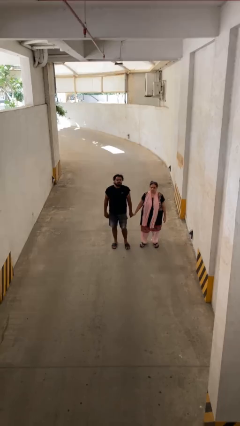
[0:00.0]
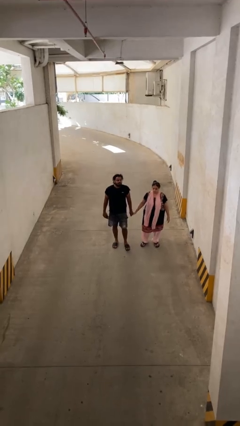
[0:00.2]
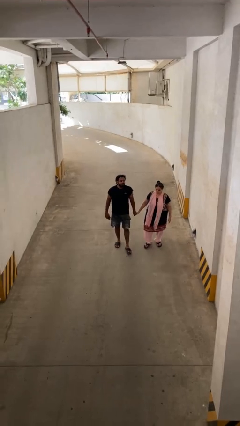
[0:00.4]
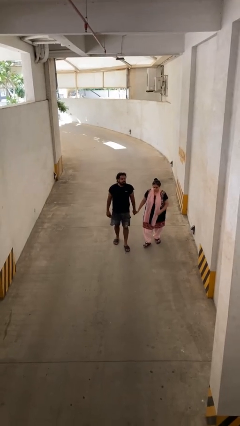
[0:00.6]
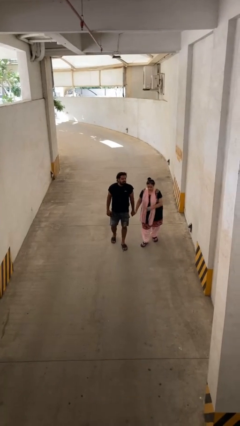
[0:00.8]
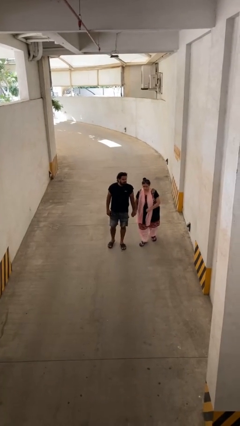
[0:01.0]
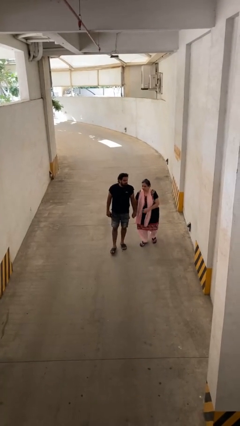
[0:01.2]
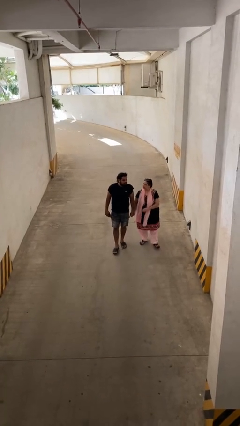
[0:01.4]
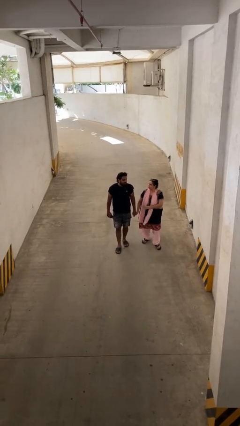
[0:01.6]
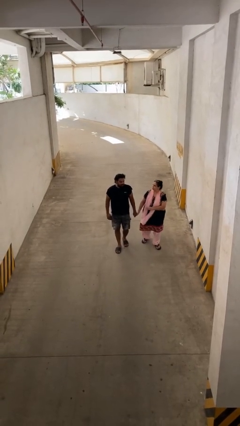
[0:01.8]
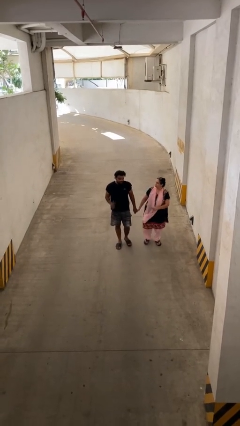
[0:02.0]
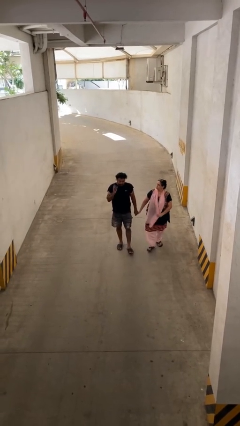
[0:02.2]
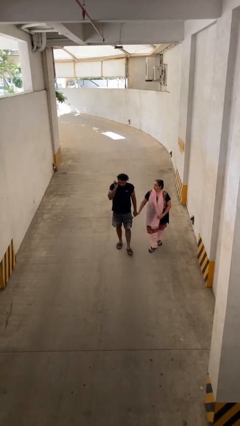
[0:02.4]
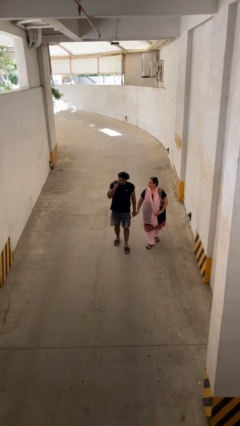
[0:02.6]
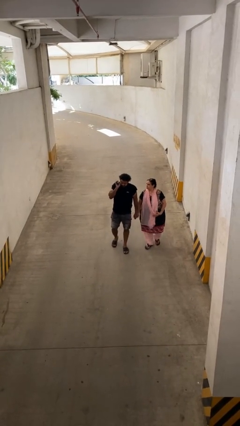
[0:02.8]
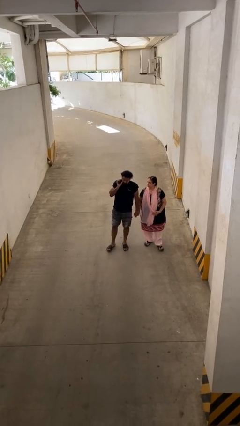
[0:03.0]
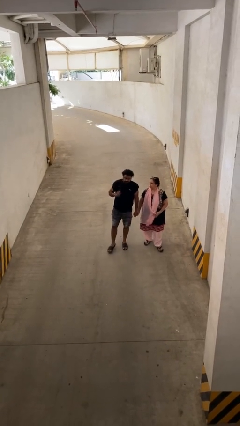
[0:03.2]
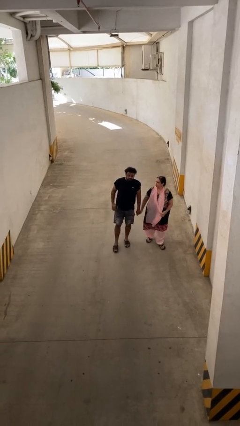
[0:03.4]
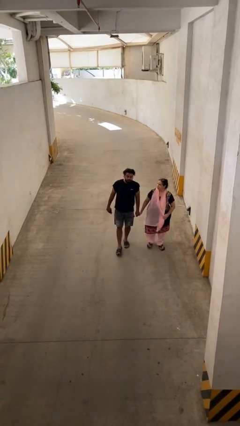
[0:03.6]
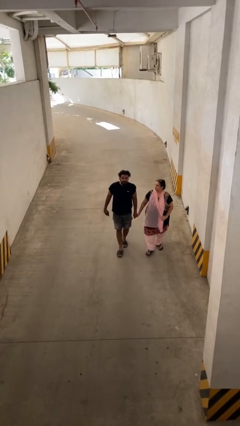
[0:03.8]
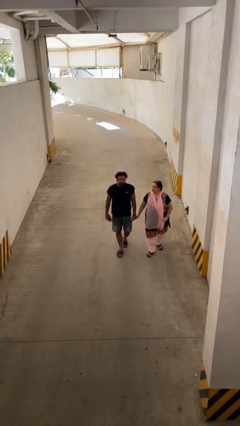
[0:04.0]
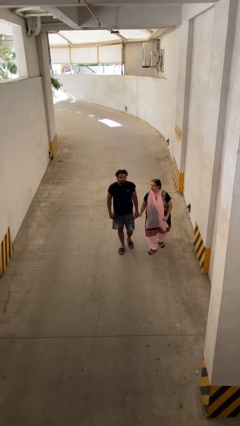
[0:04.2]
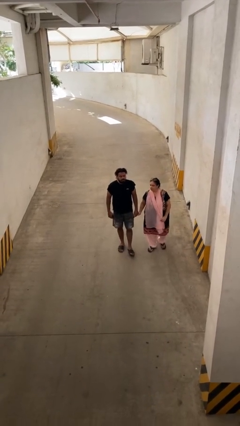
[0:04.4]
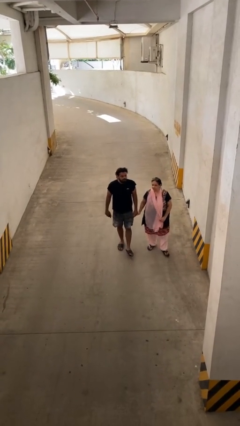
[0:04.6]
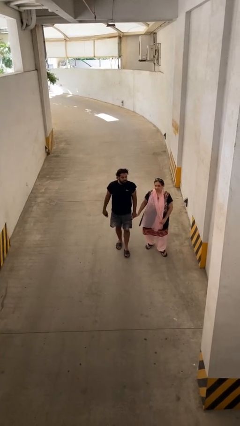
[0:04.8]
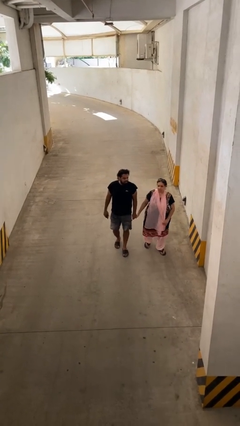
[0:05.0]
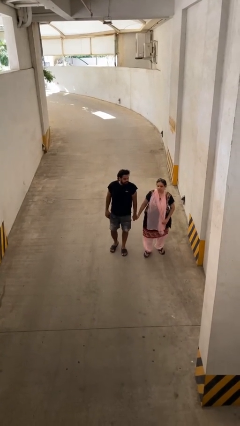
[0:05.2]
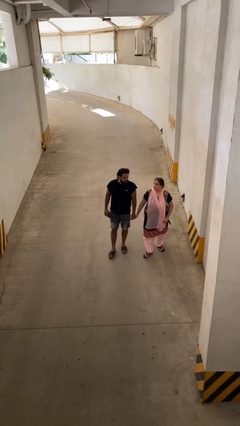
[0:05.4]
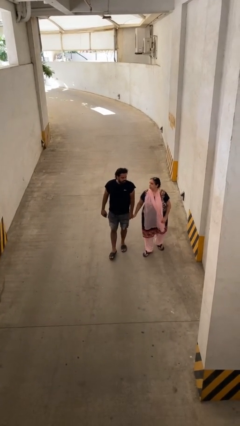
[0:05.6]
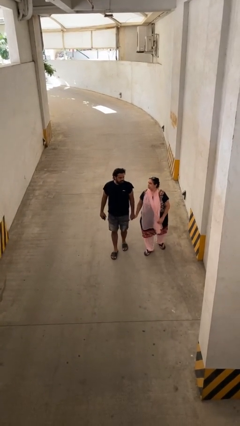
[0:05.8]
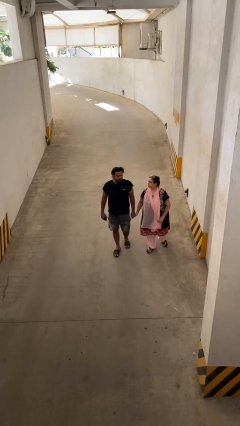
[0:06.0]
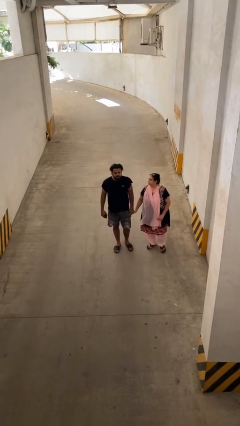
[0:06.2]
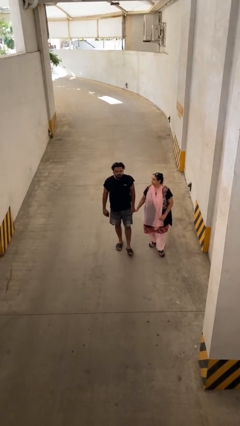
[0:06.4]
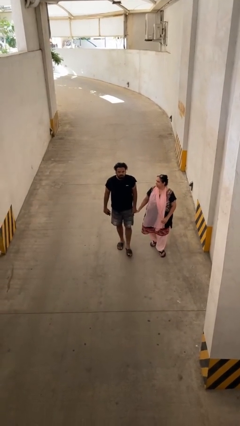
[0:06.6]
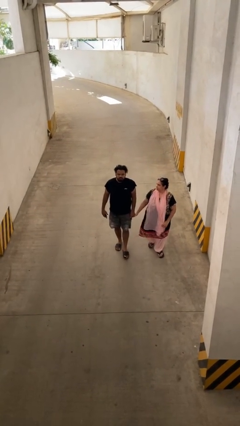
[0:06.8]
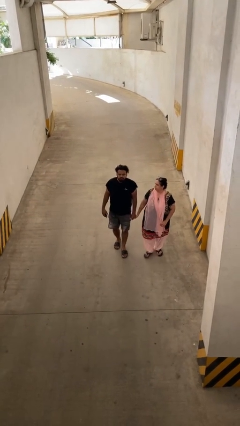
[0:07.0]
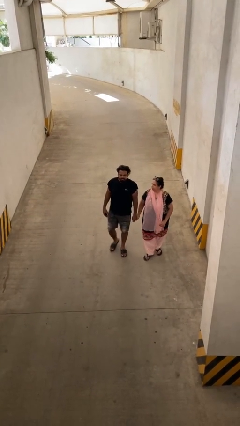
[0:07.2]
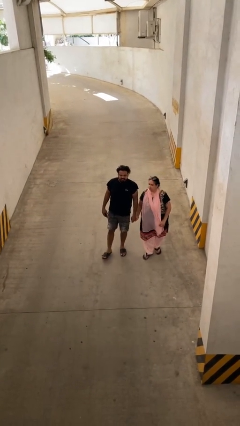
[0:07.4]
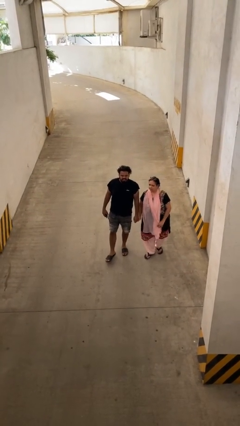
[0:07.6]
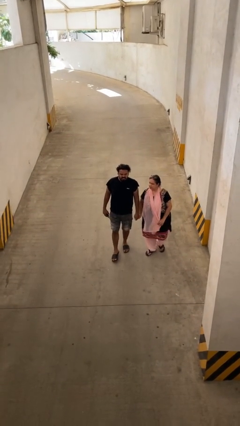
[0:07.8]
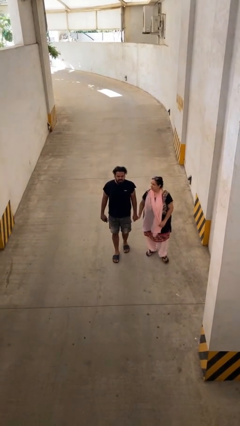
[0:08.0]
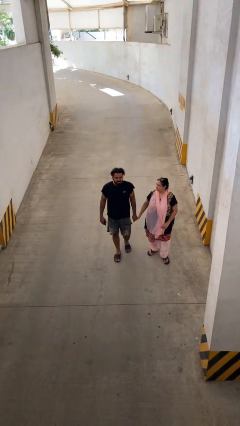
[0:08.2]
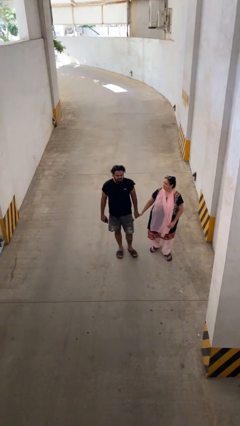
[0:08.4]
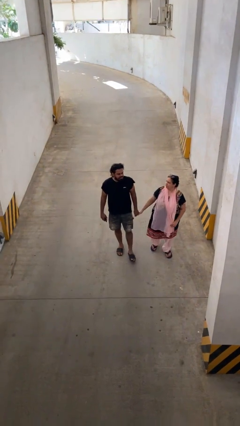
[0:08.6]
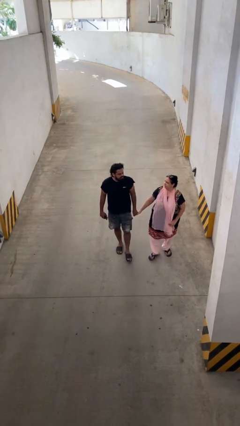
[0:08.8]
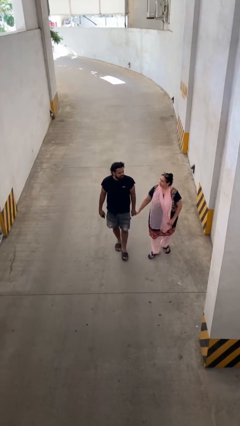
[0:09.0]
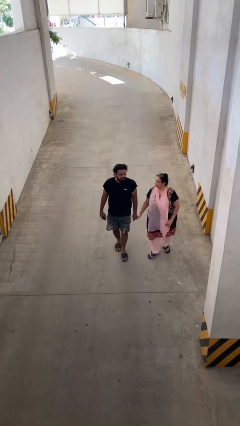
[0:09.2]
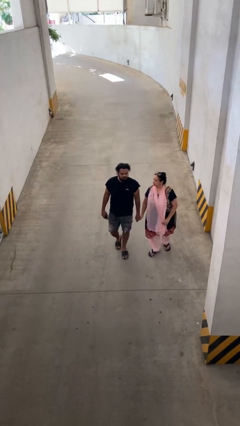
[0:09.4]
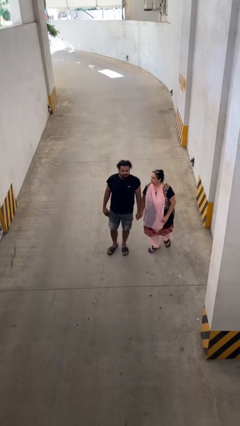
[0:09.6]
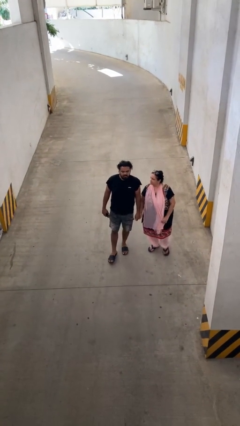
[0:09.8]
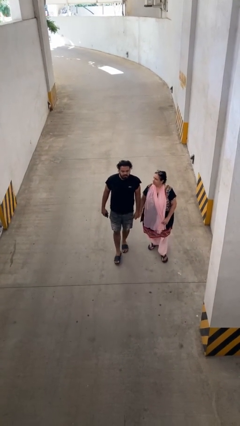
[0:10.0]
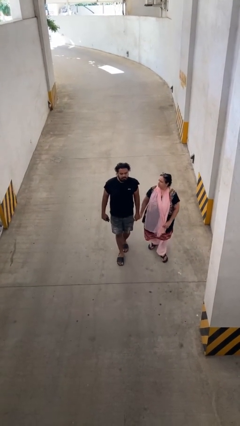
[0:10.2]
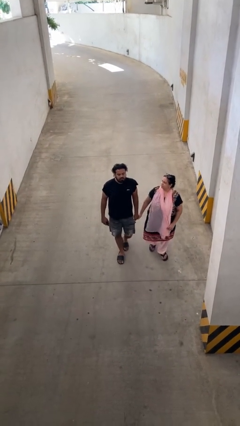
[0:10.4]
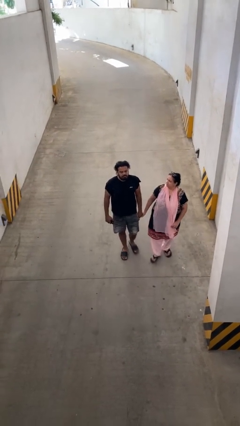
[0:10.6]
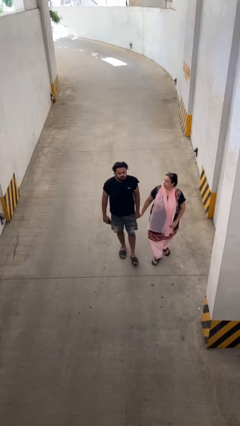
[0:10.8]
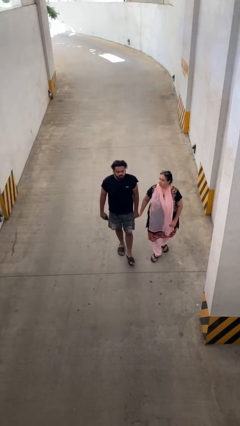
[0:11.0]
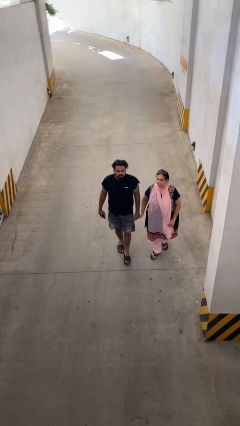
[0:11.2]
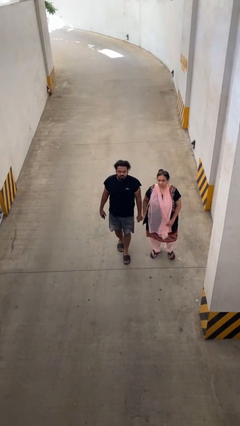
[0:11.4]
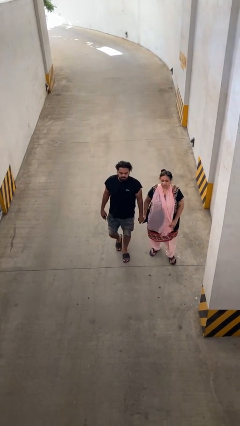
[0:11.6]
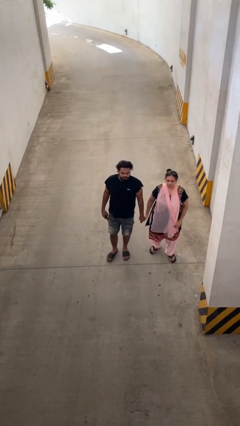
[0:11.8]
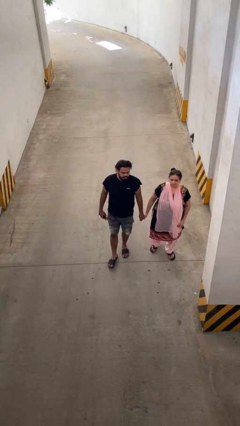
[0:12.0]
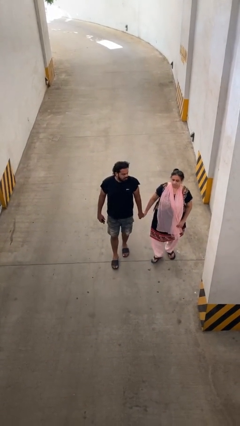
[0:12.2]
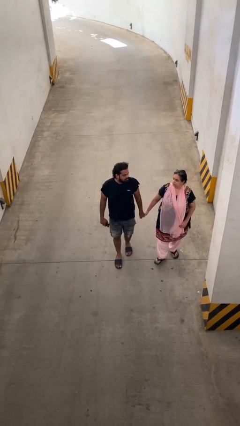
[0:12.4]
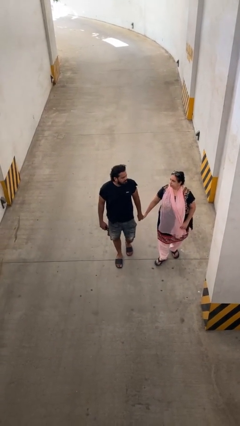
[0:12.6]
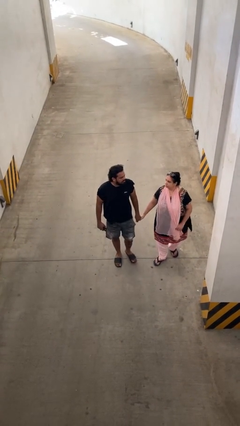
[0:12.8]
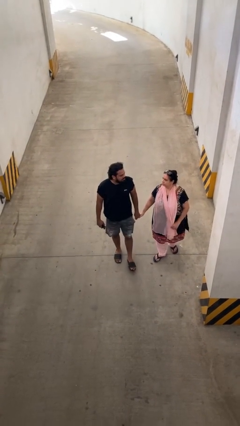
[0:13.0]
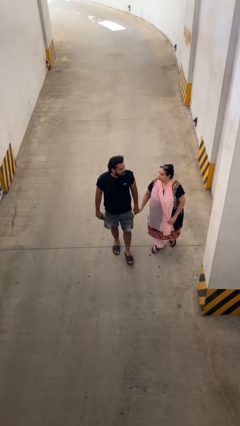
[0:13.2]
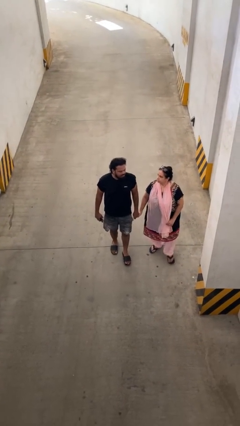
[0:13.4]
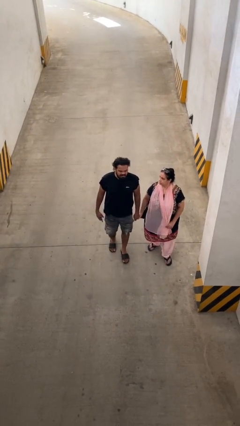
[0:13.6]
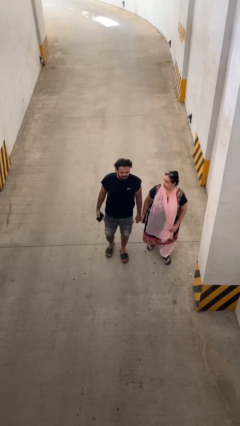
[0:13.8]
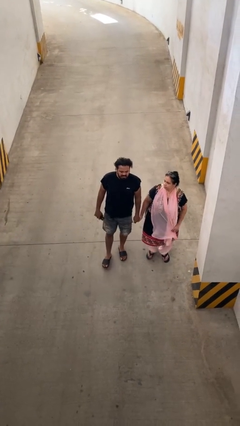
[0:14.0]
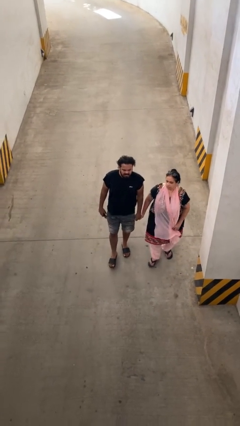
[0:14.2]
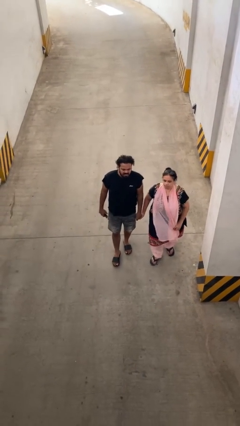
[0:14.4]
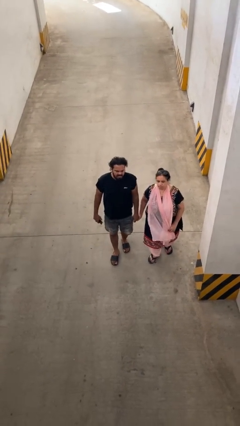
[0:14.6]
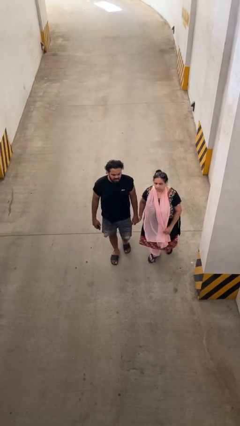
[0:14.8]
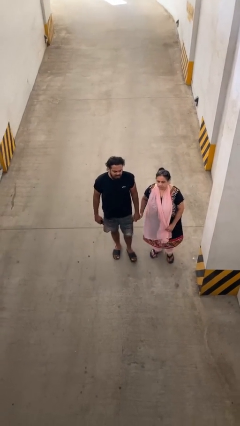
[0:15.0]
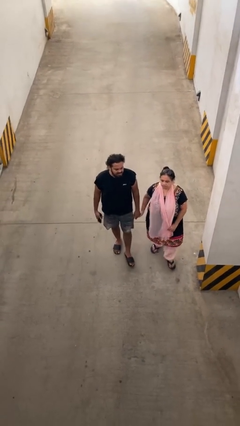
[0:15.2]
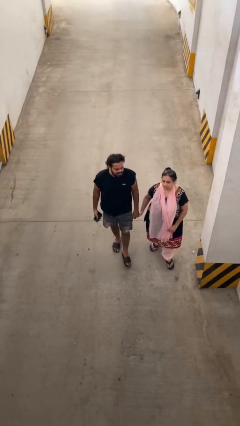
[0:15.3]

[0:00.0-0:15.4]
person holds hand

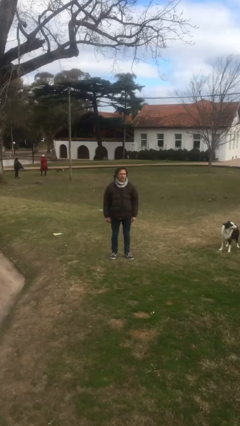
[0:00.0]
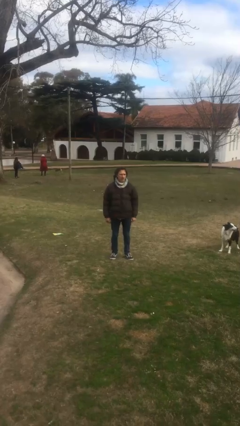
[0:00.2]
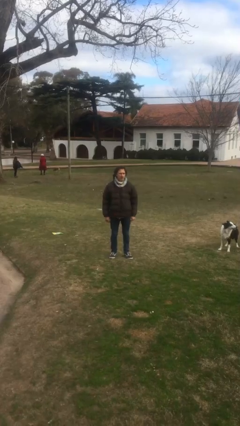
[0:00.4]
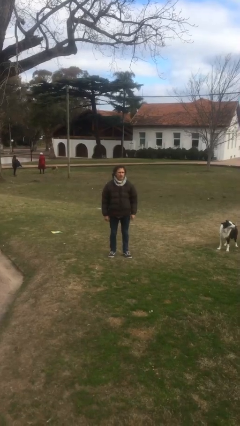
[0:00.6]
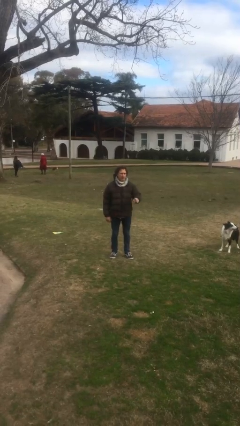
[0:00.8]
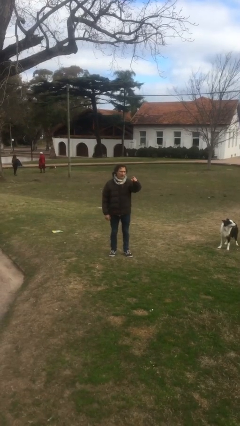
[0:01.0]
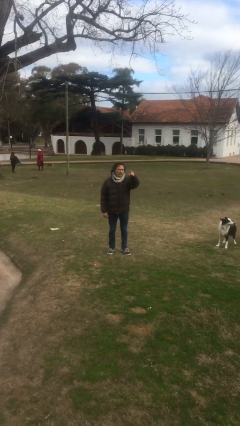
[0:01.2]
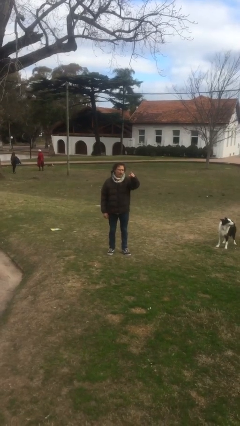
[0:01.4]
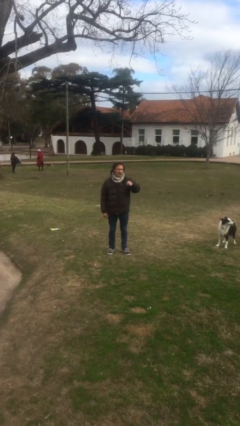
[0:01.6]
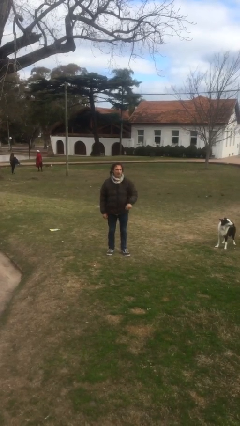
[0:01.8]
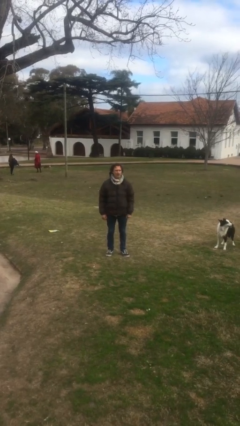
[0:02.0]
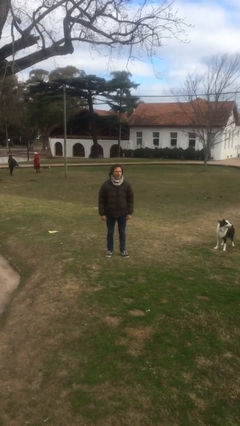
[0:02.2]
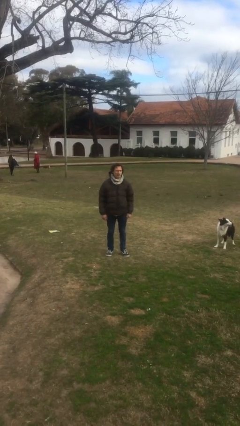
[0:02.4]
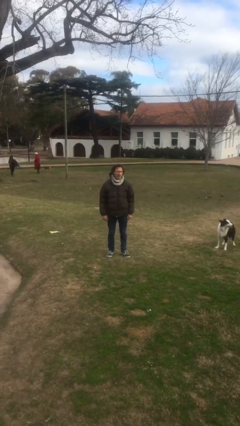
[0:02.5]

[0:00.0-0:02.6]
person points at person
